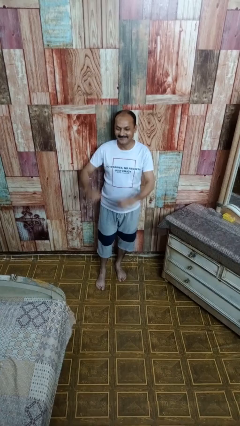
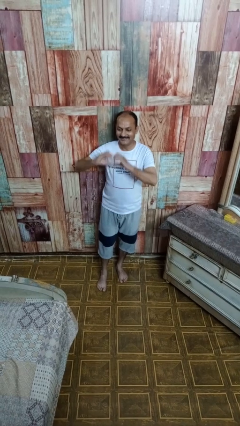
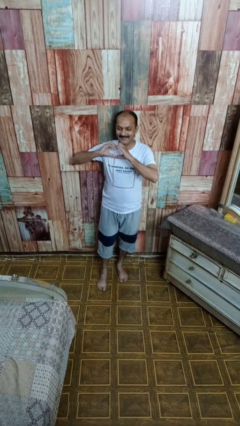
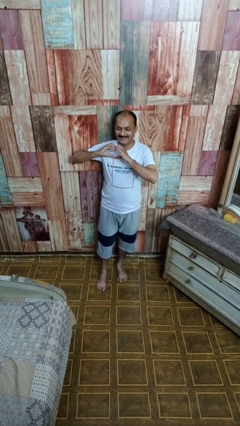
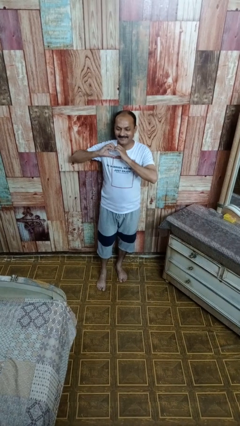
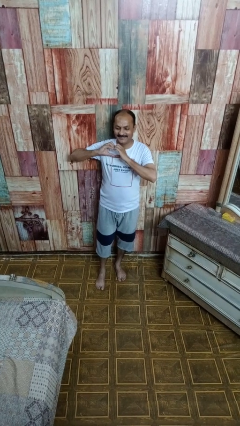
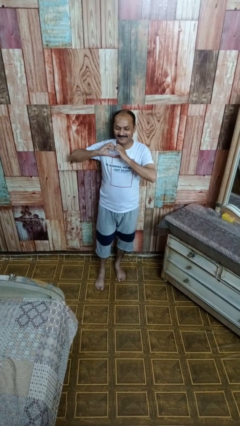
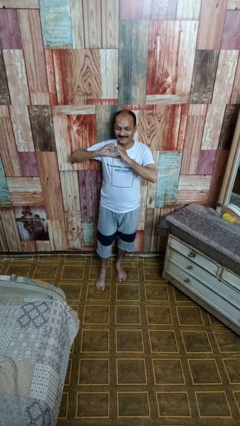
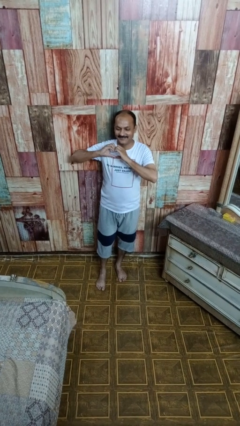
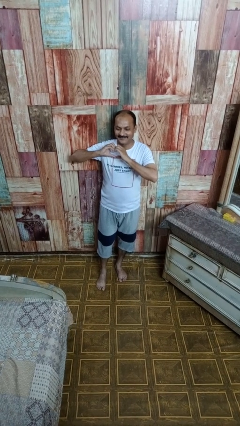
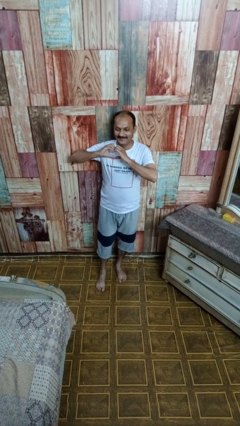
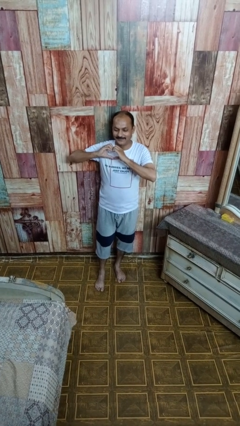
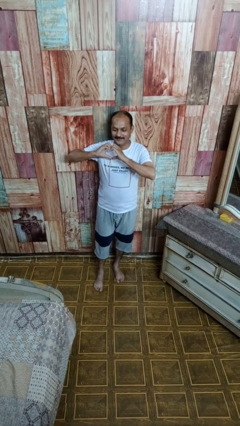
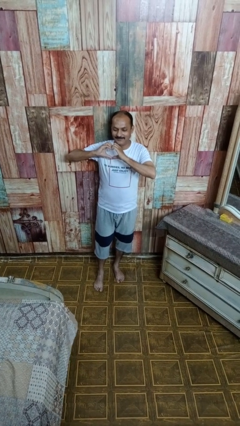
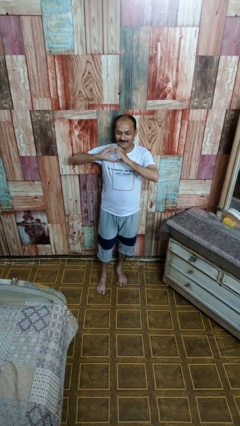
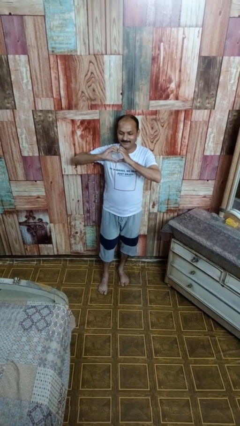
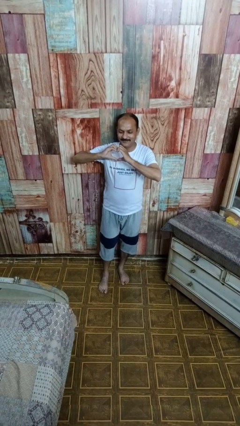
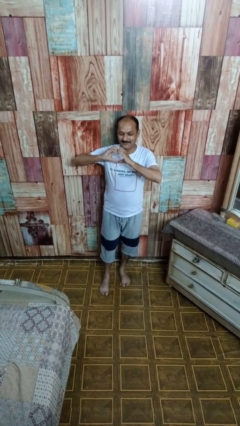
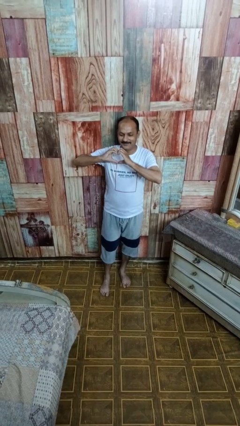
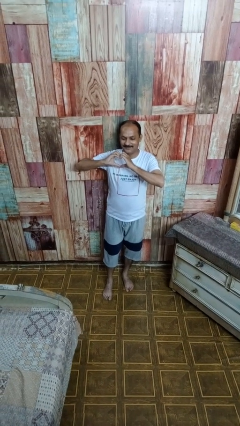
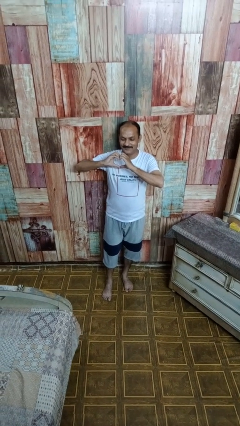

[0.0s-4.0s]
person gestures heart

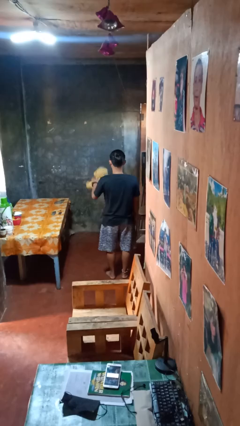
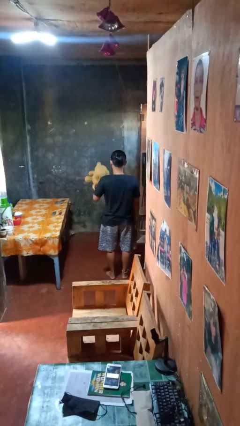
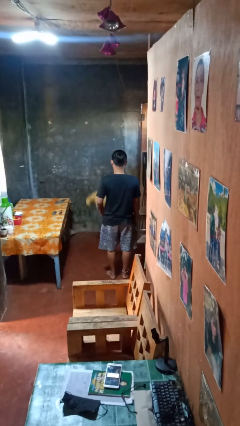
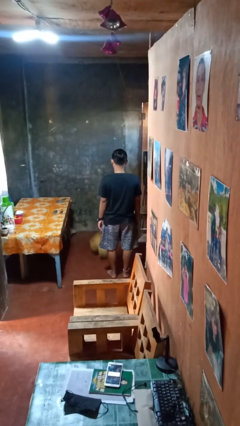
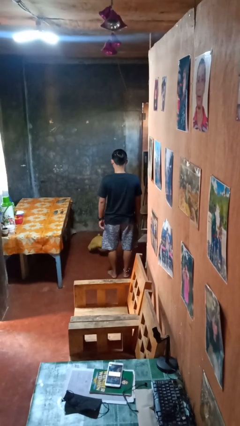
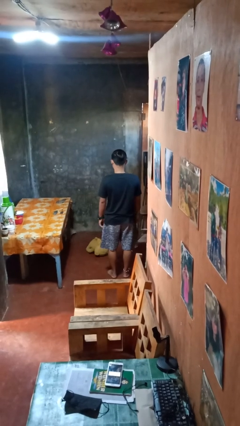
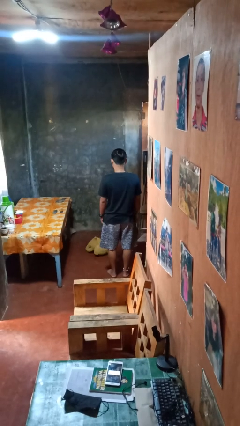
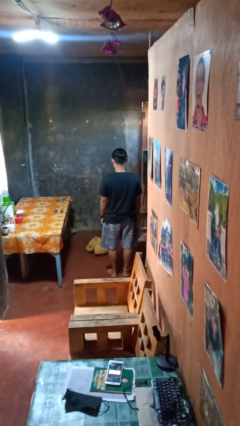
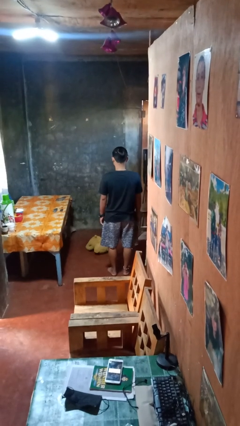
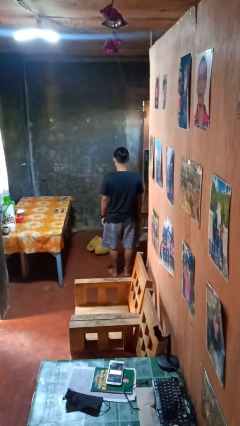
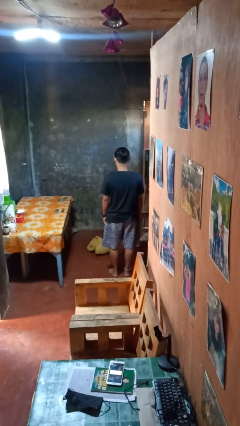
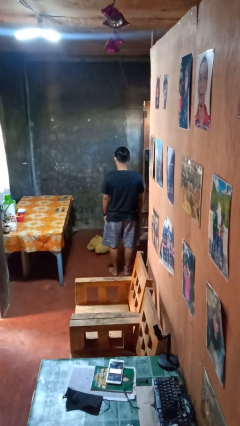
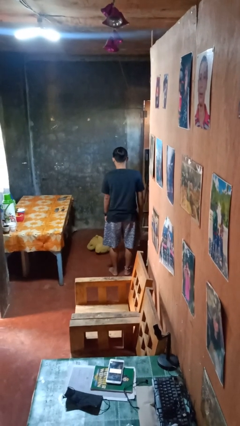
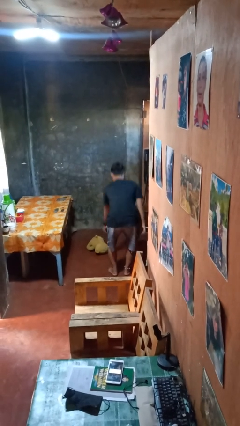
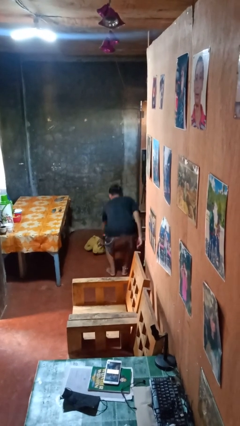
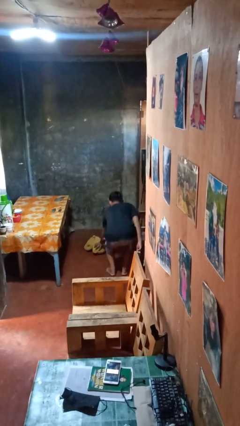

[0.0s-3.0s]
person throws object to ground

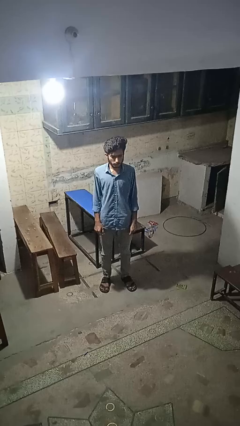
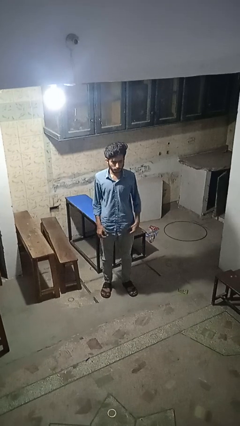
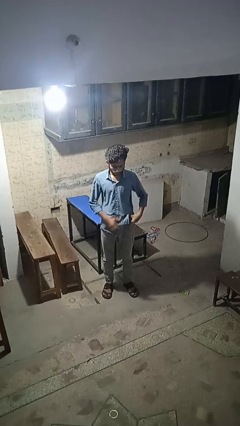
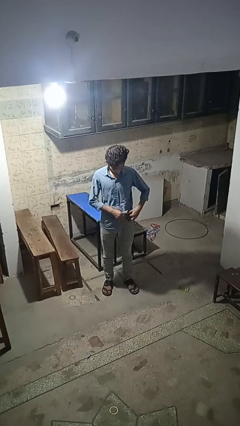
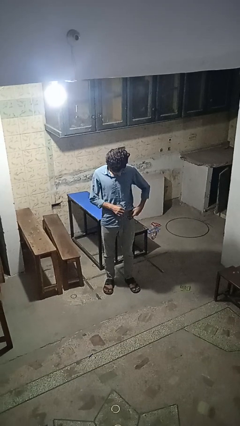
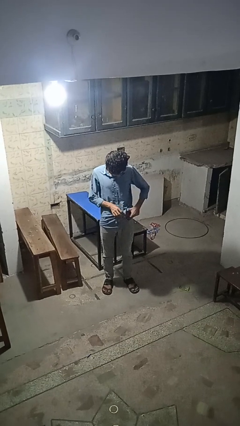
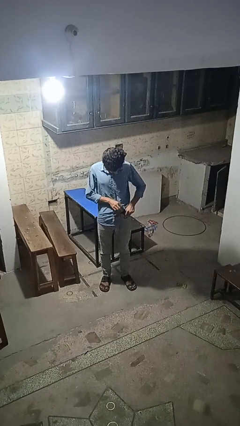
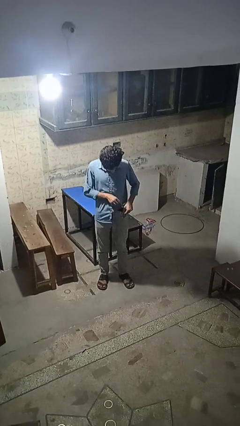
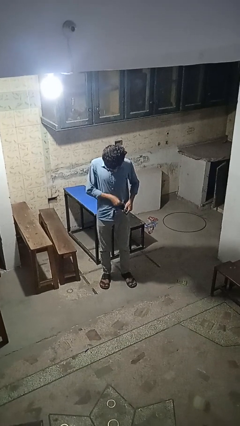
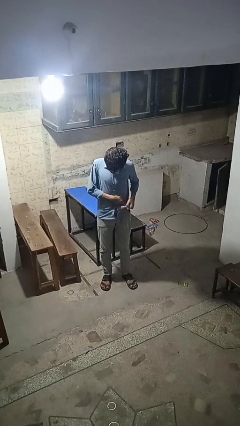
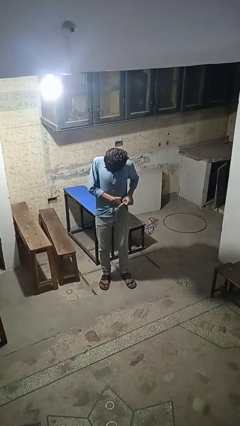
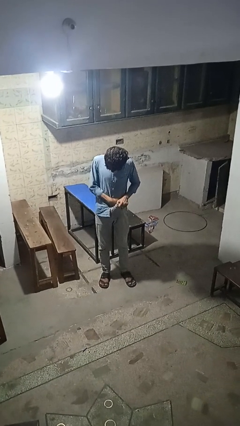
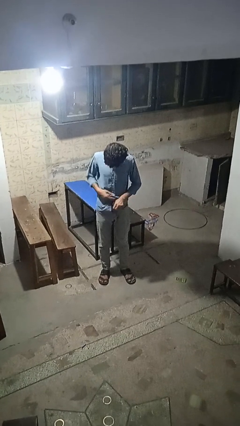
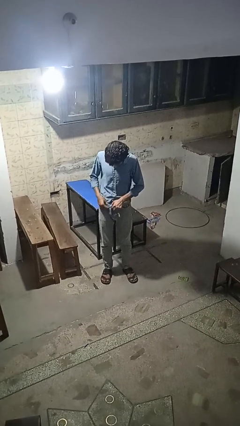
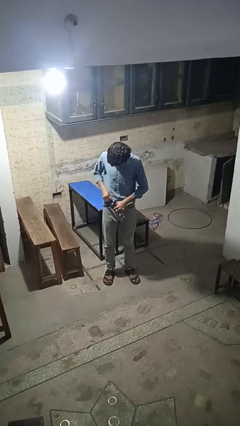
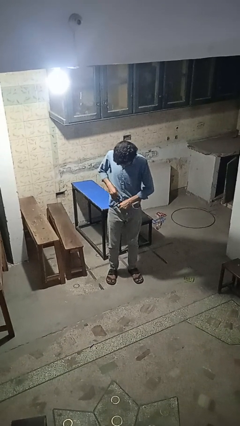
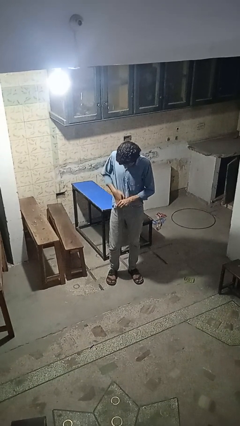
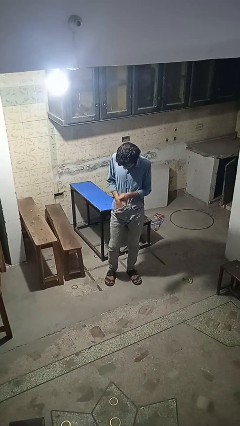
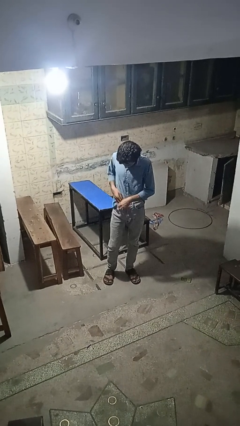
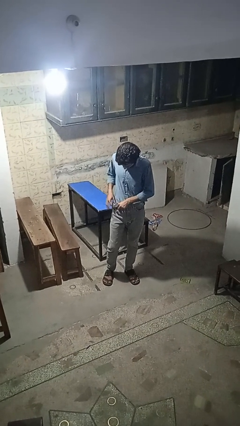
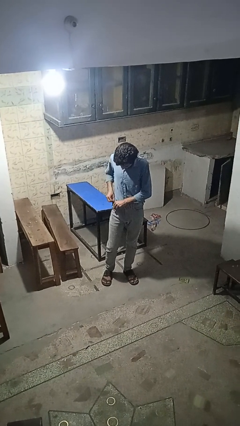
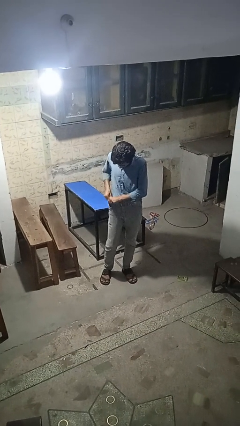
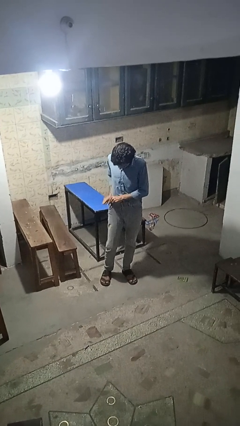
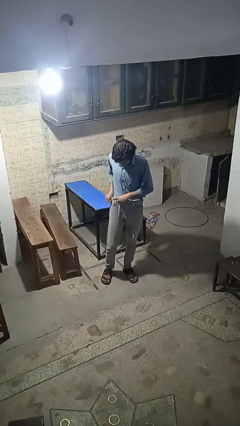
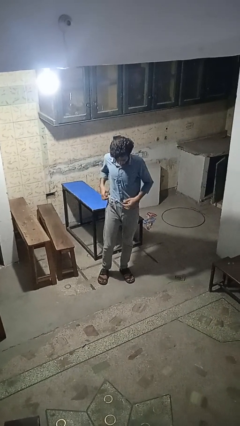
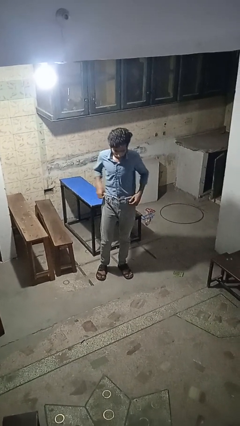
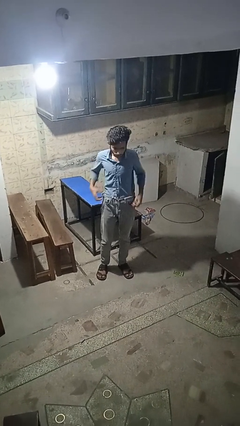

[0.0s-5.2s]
person tucks in shirt

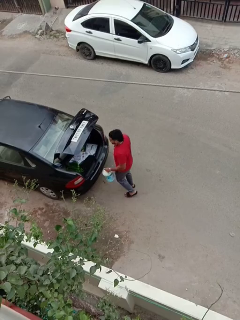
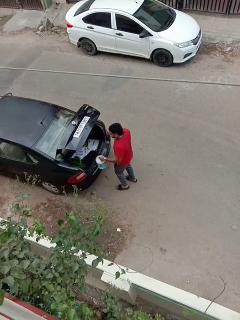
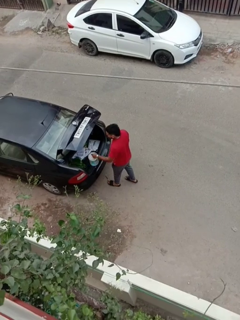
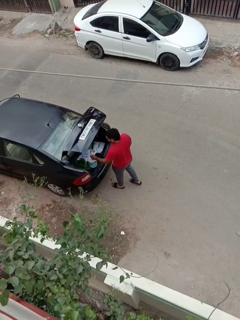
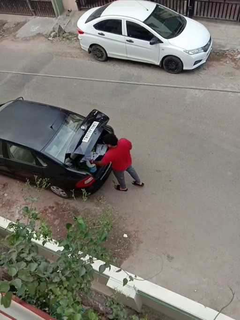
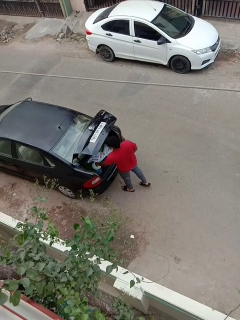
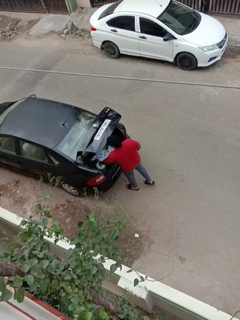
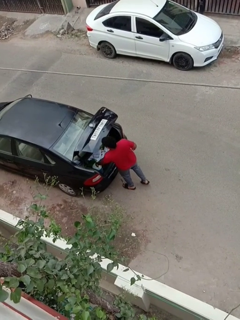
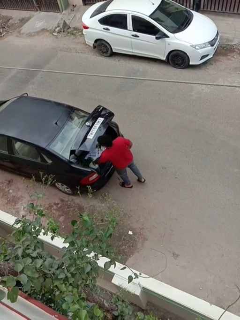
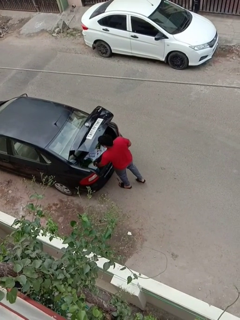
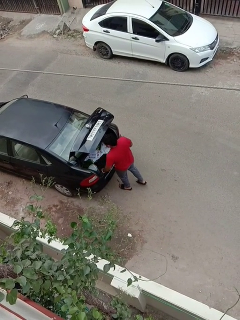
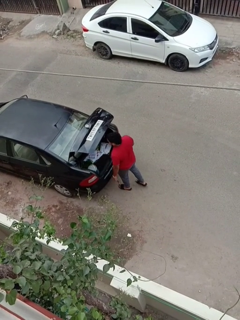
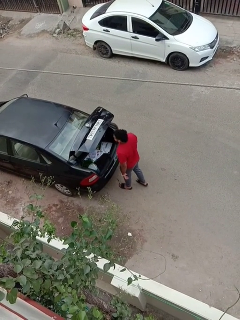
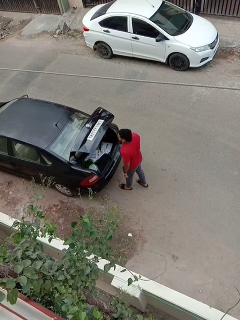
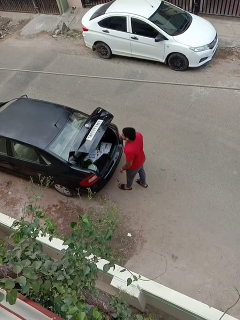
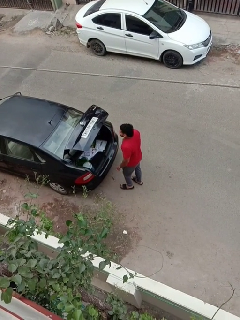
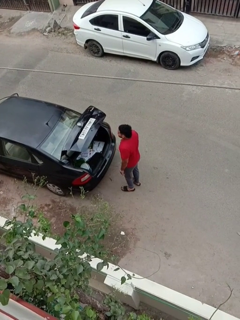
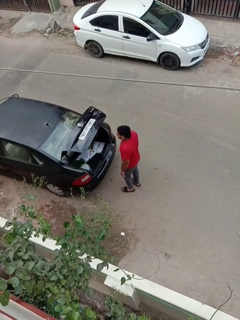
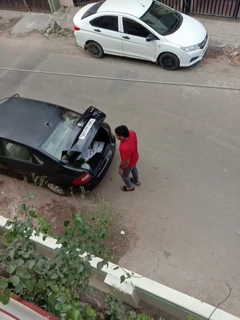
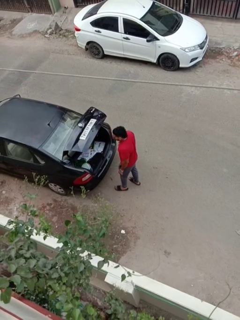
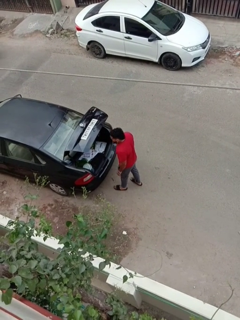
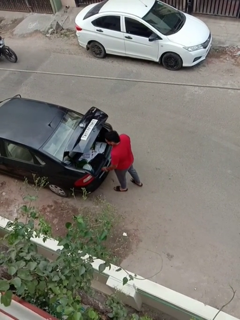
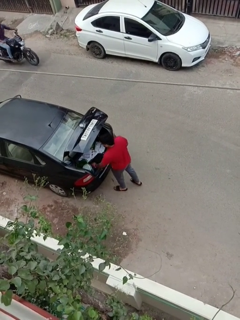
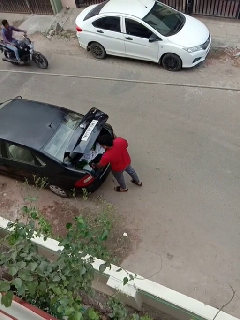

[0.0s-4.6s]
person loads car

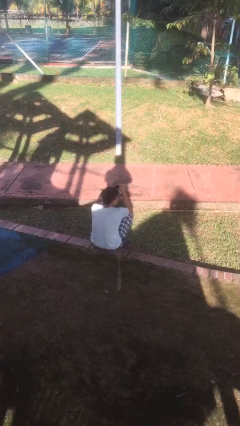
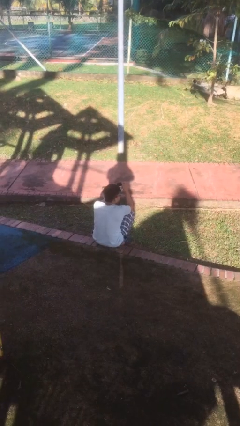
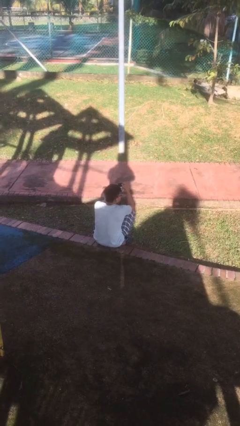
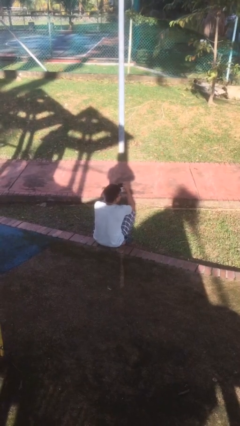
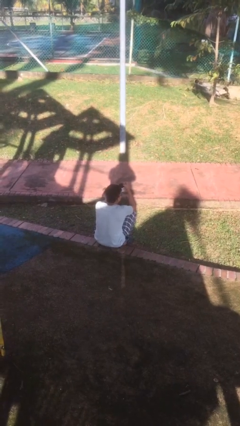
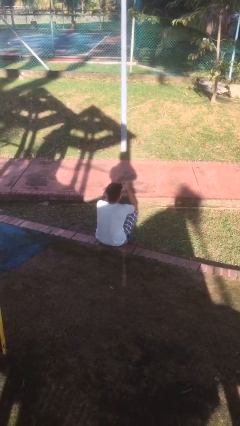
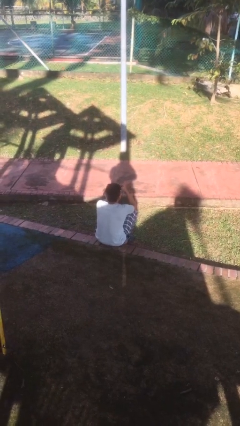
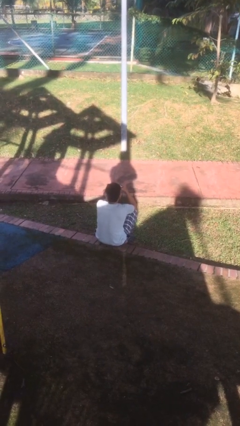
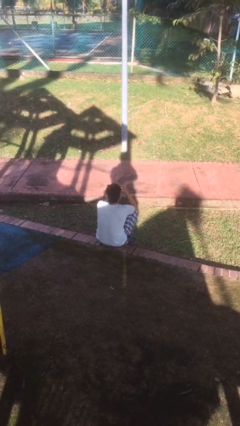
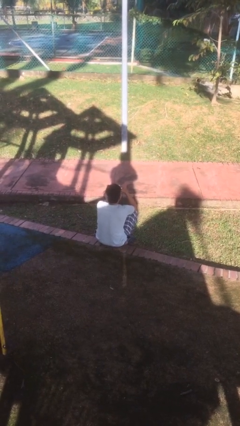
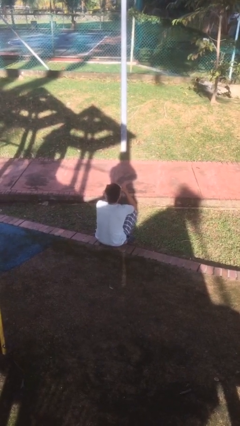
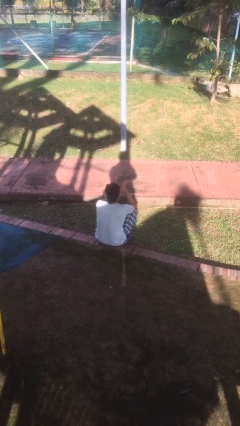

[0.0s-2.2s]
person drinks from mug
